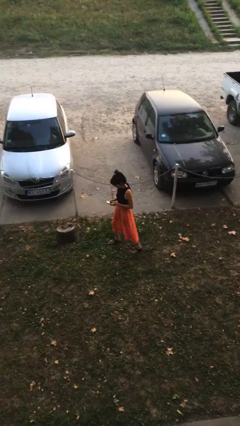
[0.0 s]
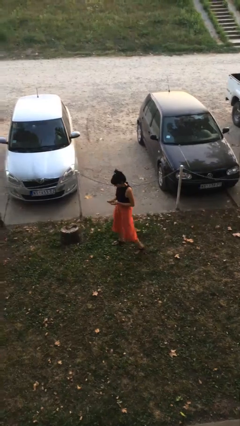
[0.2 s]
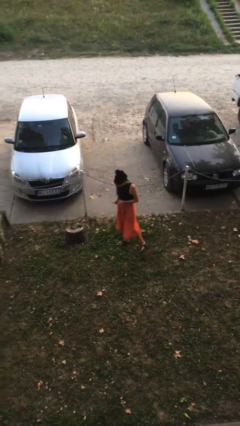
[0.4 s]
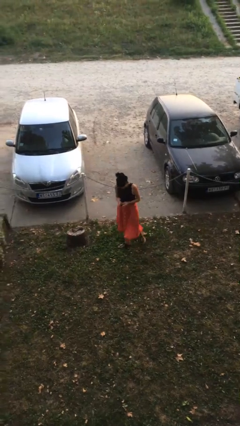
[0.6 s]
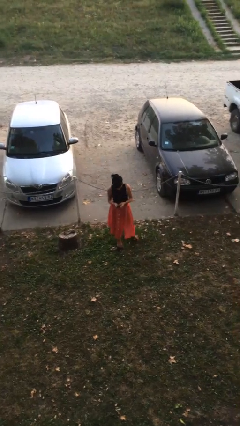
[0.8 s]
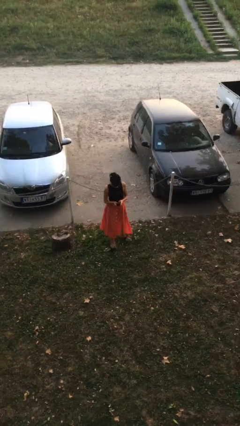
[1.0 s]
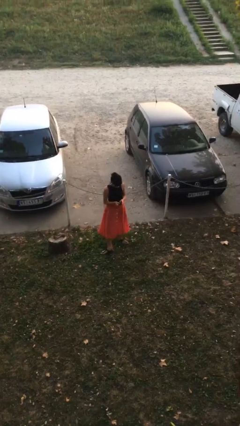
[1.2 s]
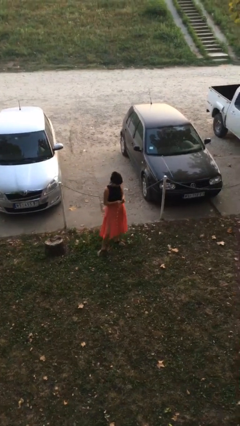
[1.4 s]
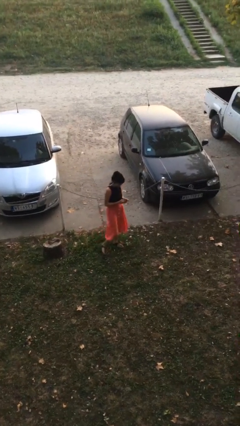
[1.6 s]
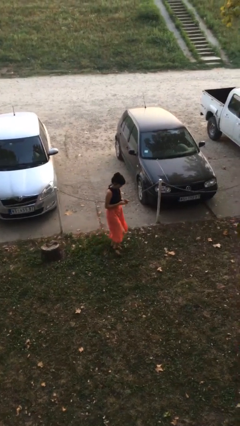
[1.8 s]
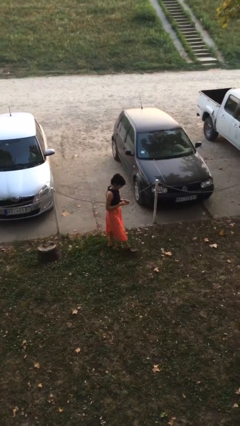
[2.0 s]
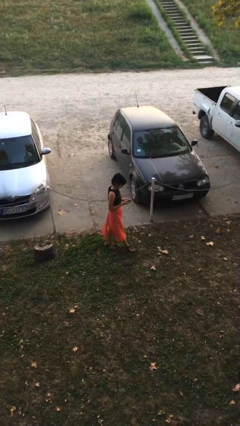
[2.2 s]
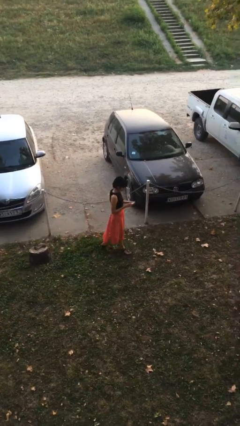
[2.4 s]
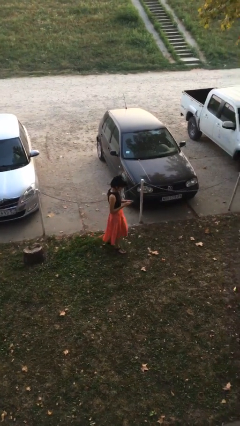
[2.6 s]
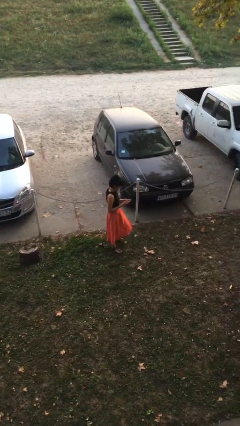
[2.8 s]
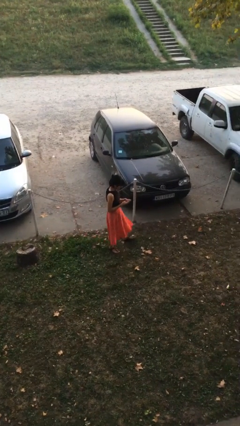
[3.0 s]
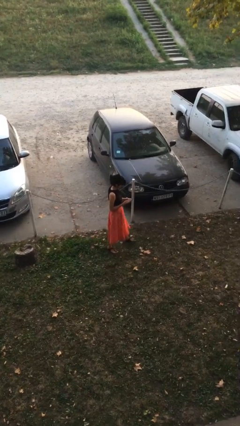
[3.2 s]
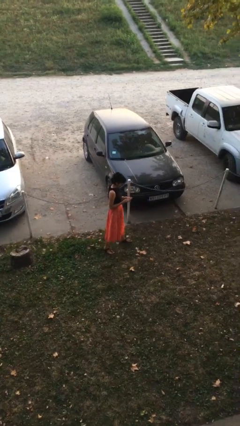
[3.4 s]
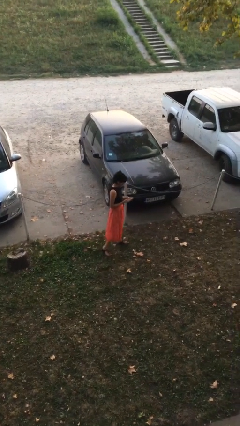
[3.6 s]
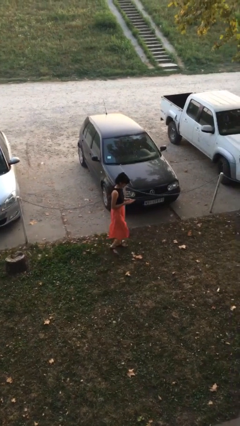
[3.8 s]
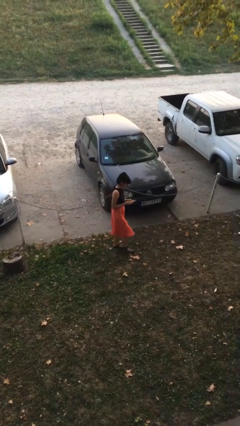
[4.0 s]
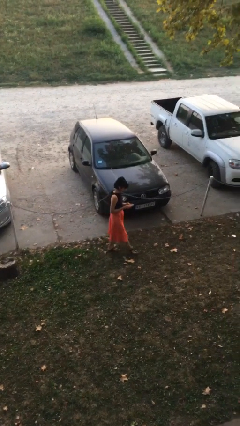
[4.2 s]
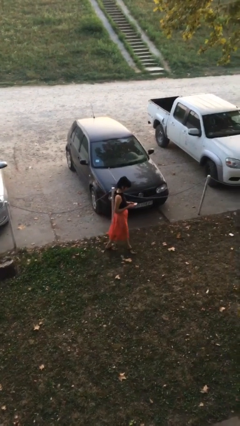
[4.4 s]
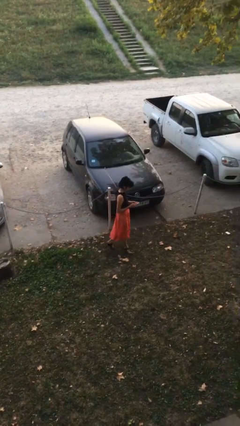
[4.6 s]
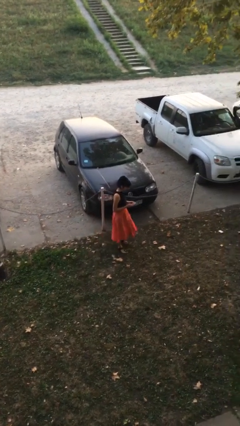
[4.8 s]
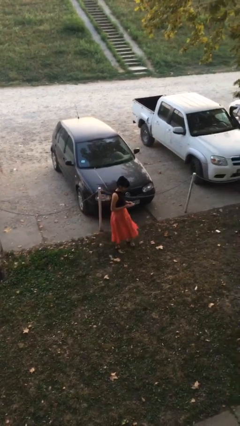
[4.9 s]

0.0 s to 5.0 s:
person texts on phone

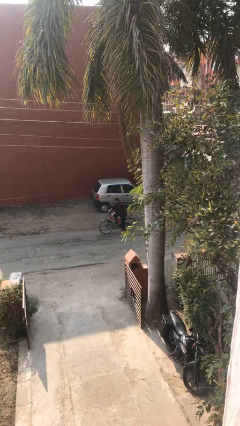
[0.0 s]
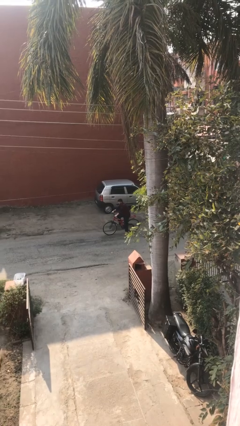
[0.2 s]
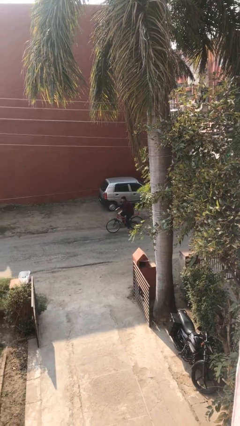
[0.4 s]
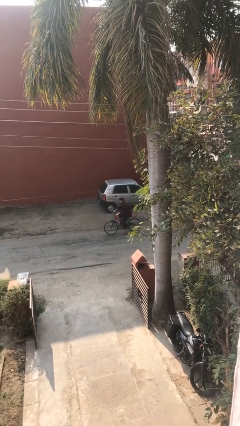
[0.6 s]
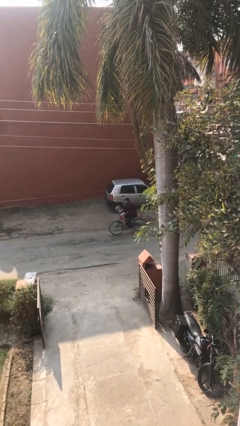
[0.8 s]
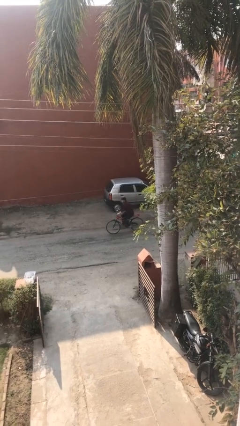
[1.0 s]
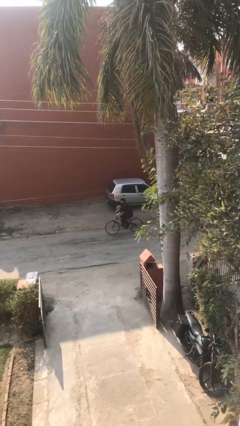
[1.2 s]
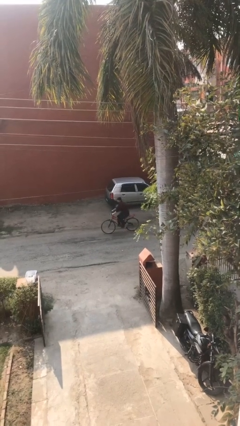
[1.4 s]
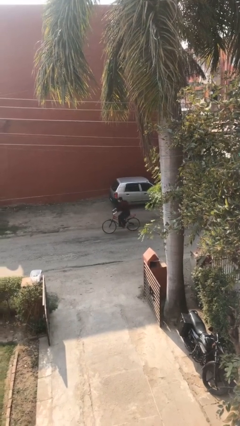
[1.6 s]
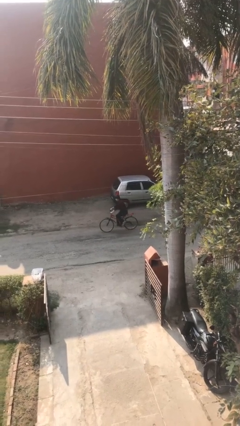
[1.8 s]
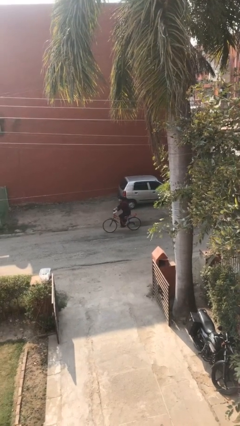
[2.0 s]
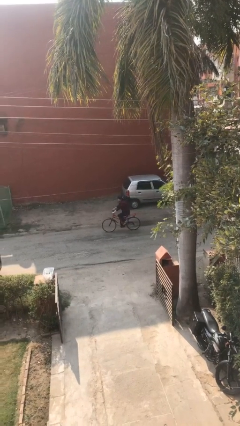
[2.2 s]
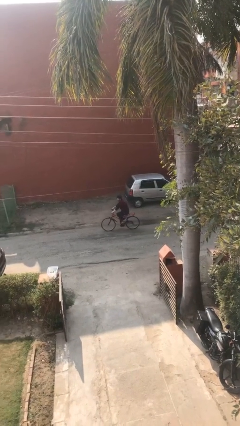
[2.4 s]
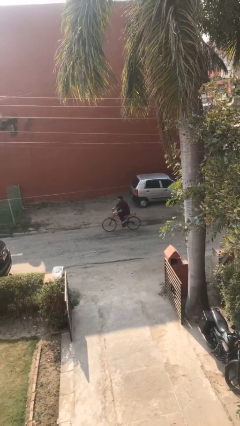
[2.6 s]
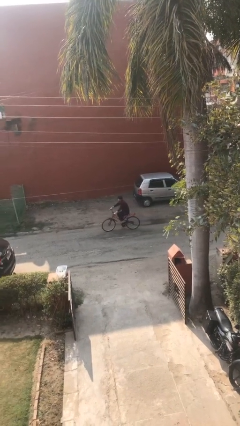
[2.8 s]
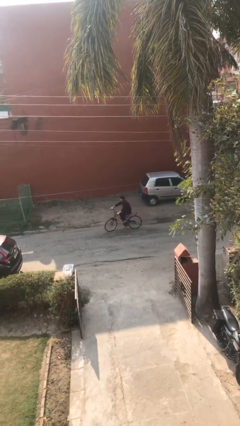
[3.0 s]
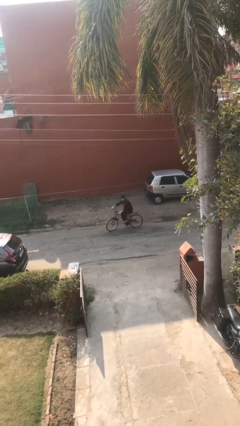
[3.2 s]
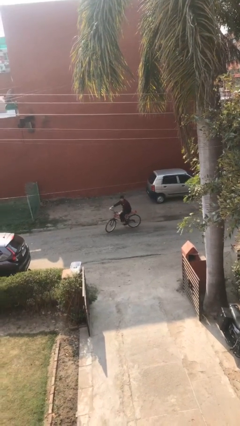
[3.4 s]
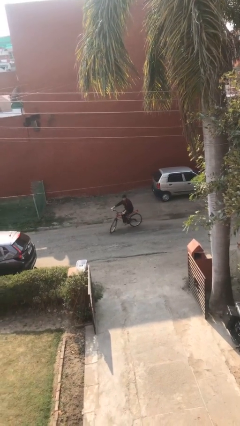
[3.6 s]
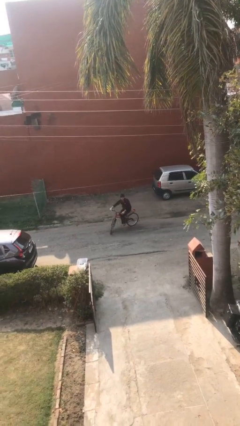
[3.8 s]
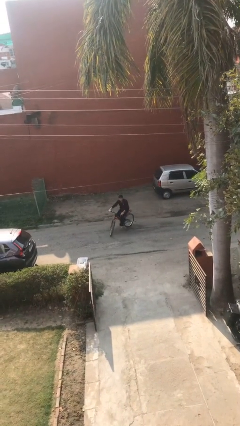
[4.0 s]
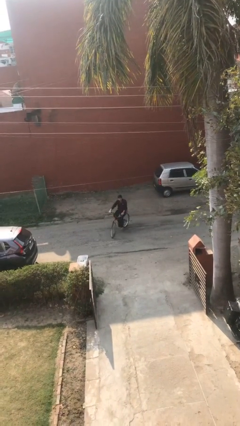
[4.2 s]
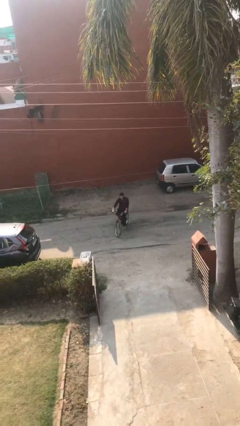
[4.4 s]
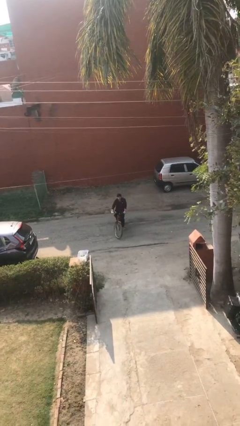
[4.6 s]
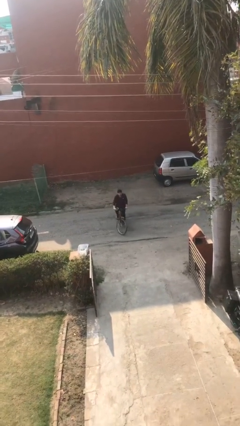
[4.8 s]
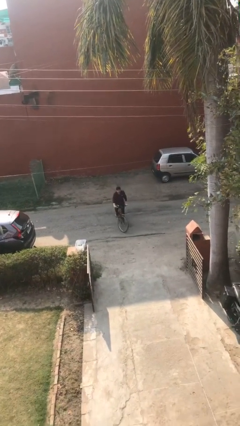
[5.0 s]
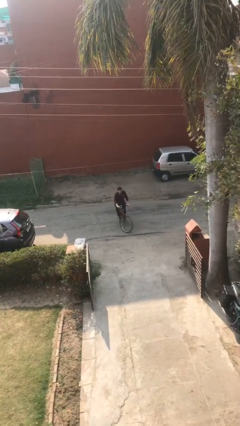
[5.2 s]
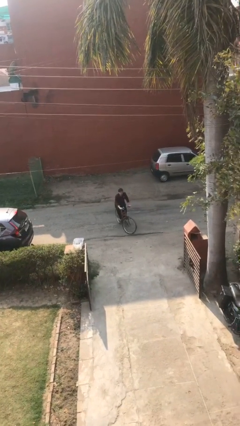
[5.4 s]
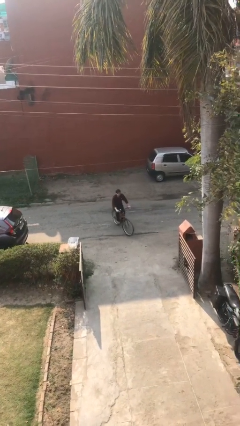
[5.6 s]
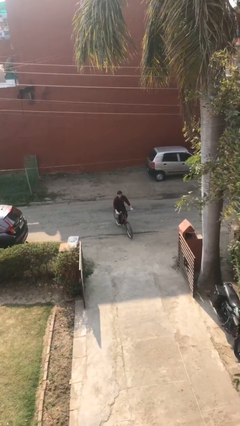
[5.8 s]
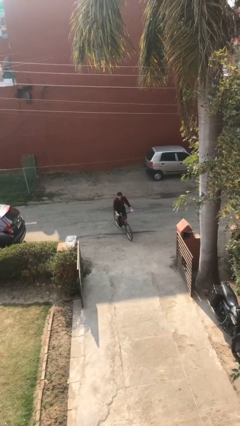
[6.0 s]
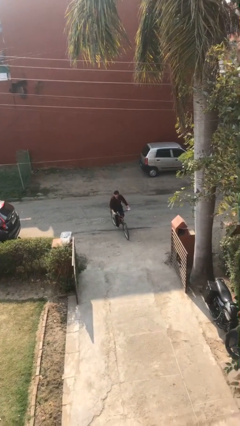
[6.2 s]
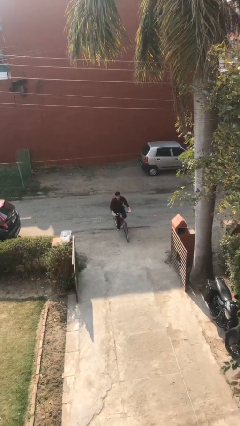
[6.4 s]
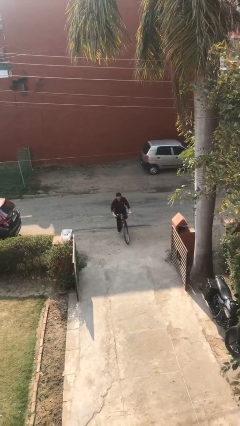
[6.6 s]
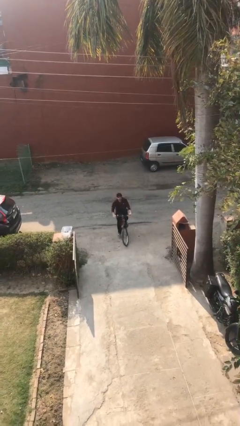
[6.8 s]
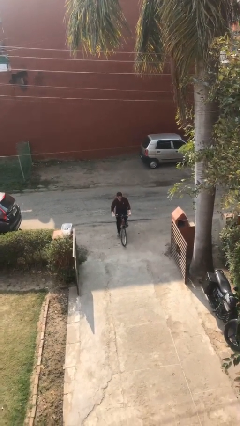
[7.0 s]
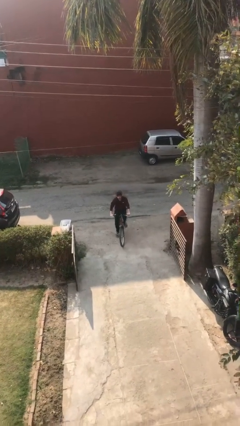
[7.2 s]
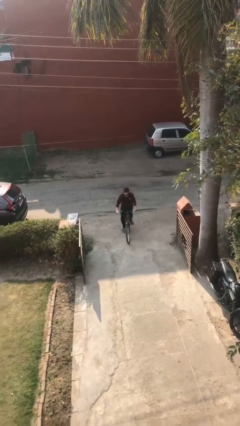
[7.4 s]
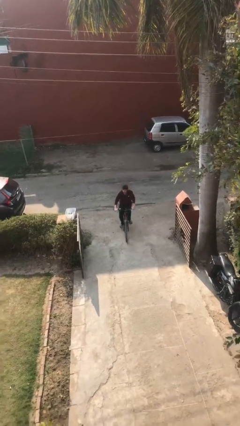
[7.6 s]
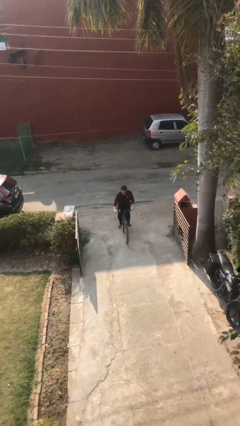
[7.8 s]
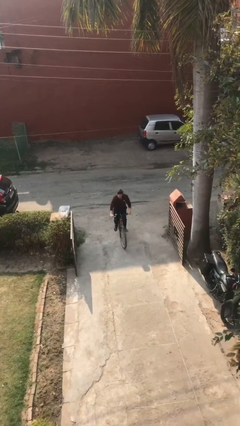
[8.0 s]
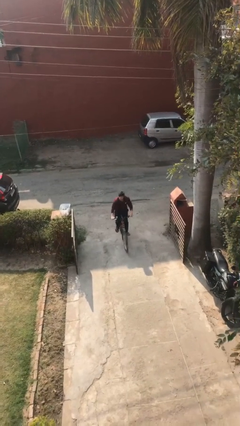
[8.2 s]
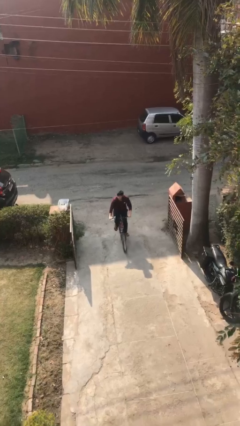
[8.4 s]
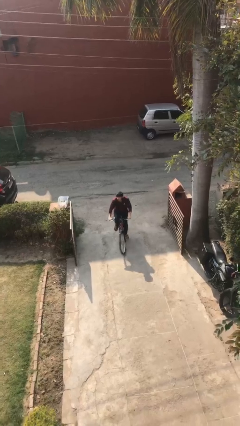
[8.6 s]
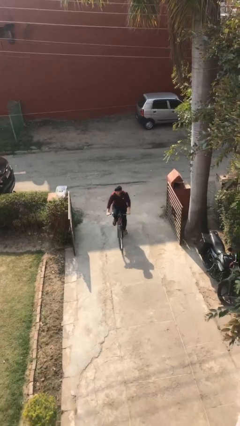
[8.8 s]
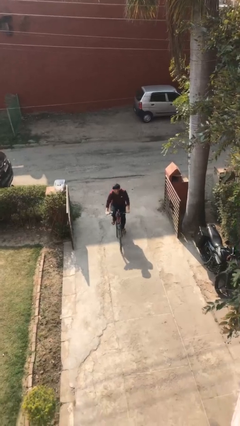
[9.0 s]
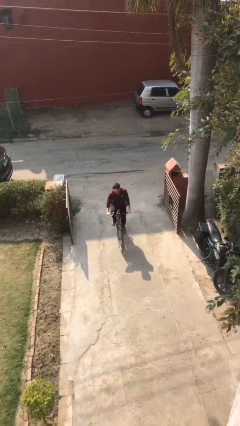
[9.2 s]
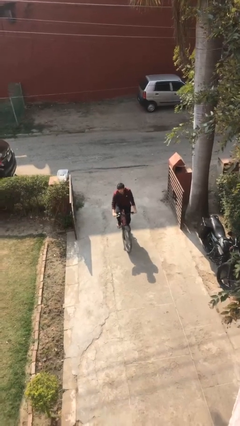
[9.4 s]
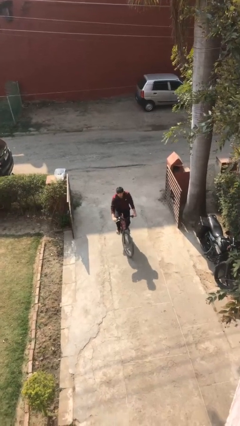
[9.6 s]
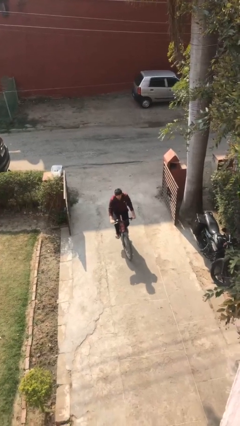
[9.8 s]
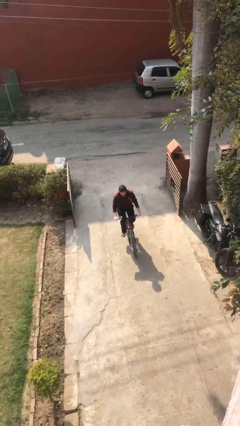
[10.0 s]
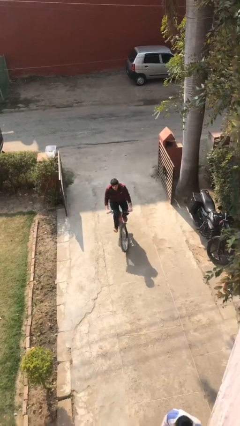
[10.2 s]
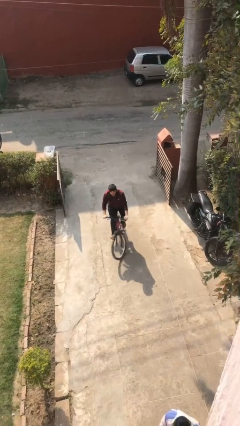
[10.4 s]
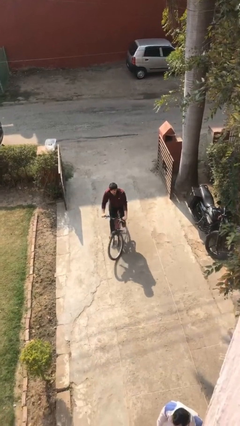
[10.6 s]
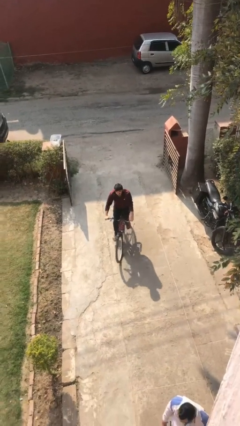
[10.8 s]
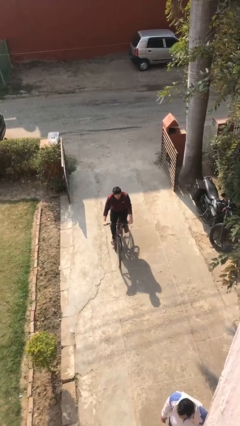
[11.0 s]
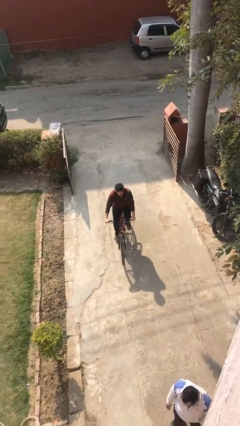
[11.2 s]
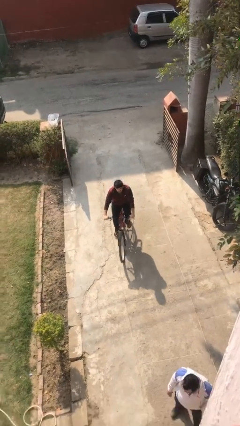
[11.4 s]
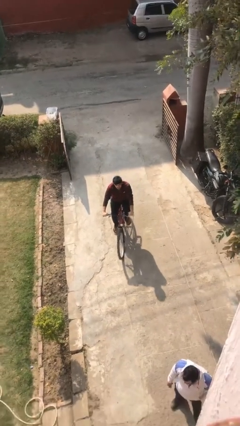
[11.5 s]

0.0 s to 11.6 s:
person rides bicycle

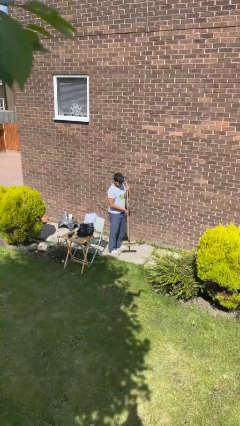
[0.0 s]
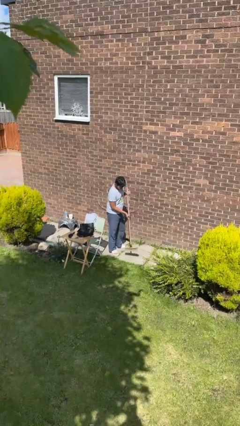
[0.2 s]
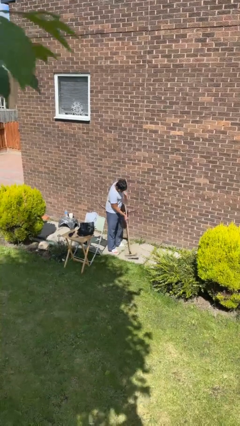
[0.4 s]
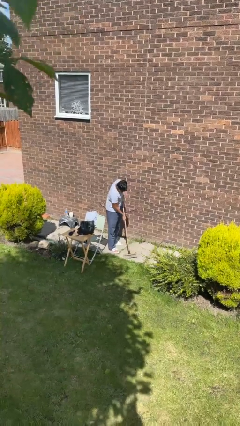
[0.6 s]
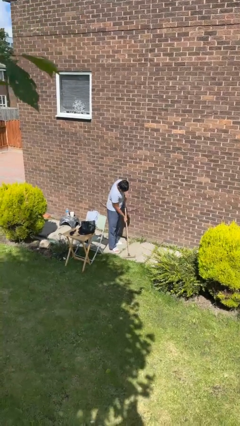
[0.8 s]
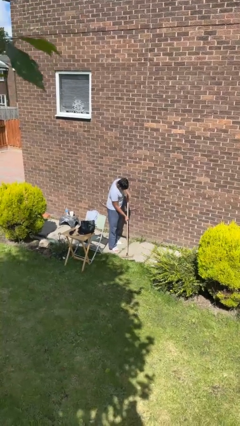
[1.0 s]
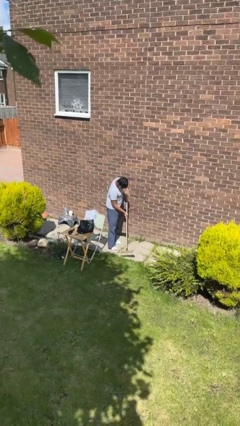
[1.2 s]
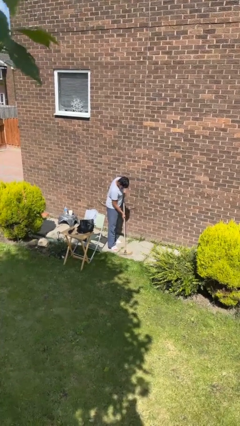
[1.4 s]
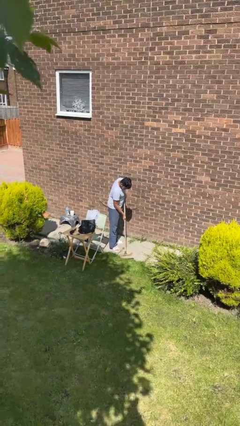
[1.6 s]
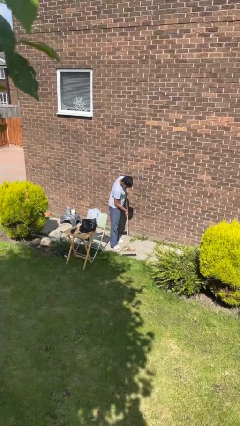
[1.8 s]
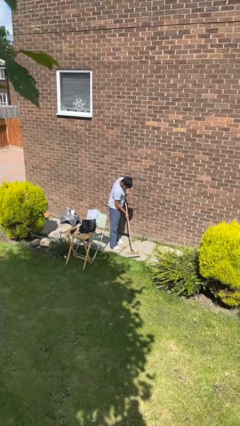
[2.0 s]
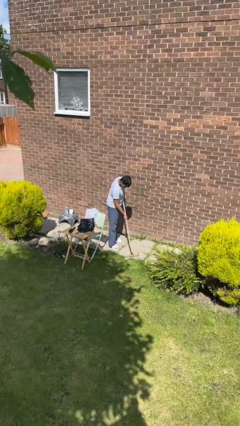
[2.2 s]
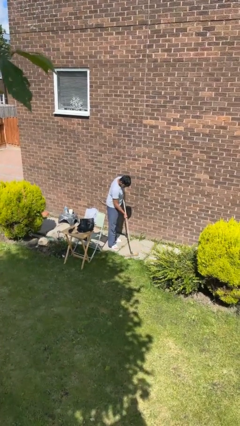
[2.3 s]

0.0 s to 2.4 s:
person sweeps floor
